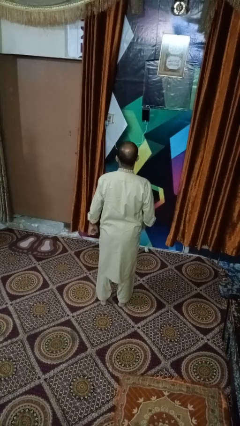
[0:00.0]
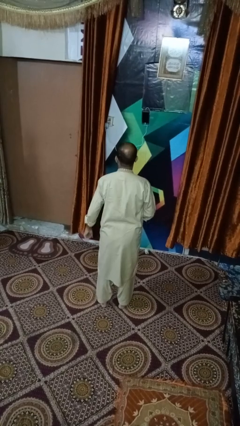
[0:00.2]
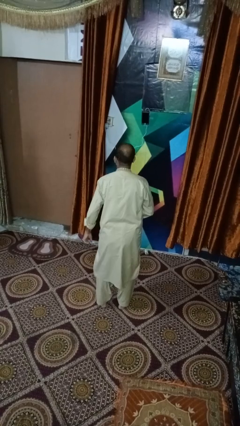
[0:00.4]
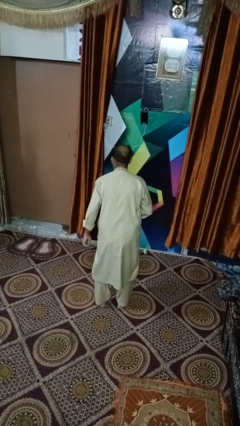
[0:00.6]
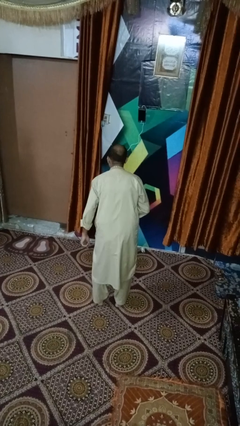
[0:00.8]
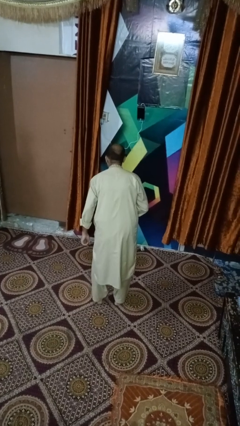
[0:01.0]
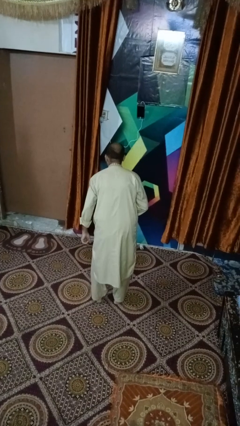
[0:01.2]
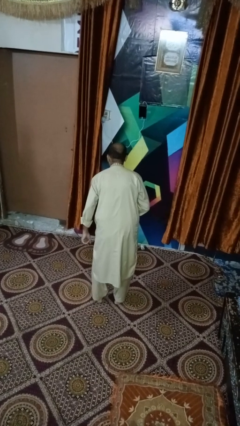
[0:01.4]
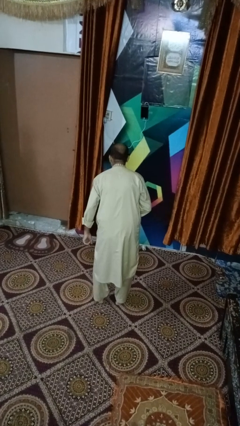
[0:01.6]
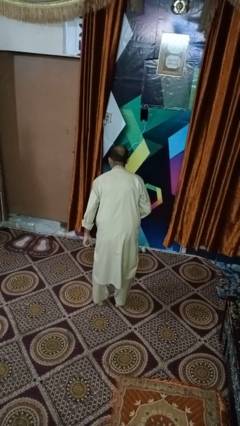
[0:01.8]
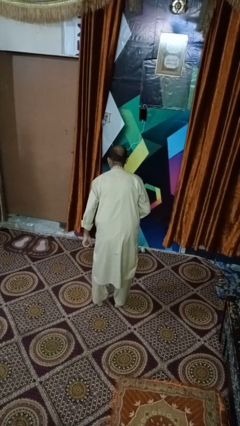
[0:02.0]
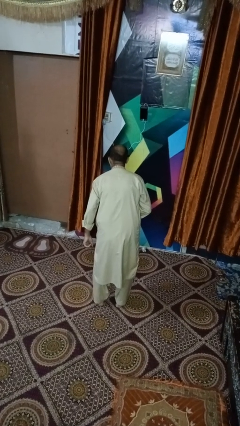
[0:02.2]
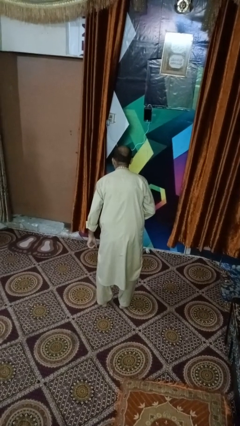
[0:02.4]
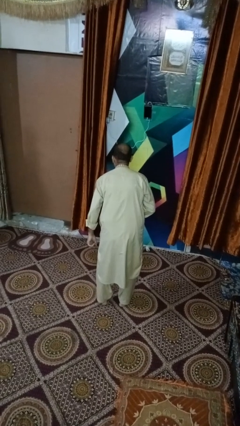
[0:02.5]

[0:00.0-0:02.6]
person bows

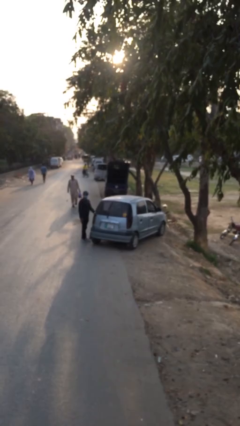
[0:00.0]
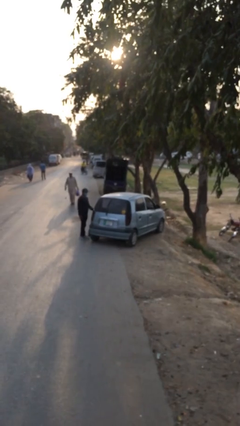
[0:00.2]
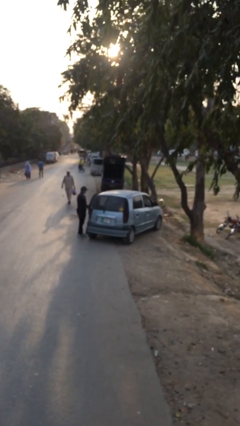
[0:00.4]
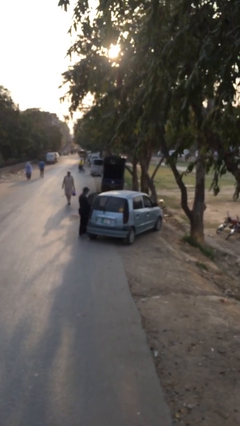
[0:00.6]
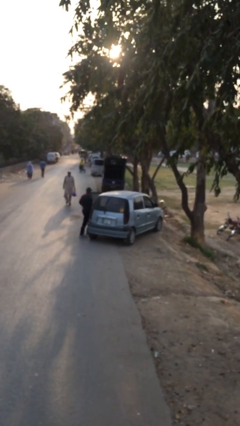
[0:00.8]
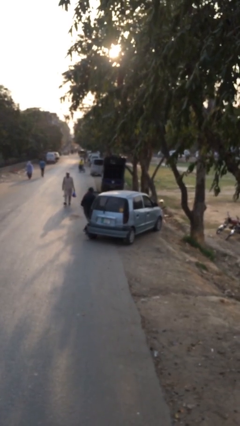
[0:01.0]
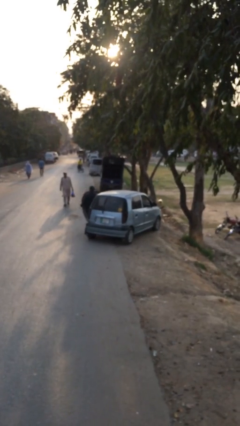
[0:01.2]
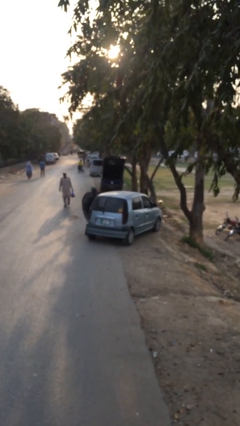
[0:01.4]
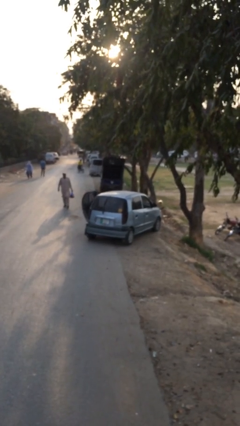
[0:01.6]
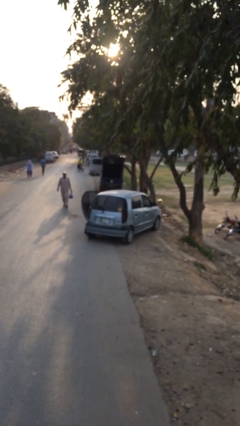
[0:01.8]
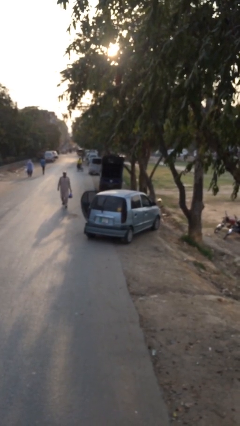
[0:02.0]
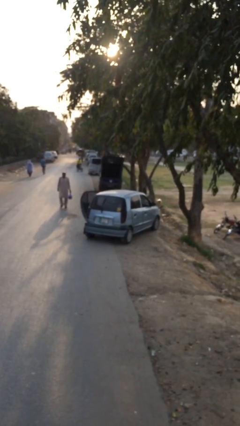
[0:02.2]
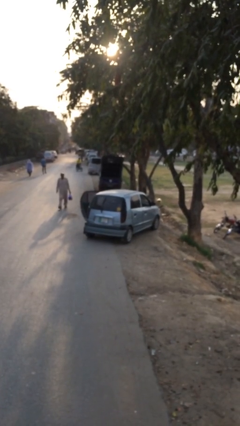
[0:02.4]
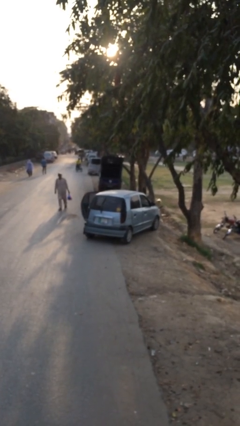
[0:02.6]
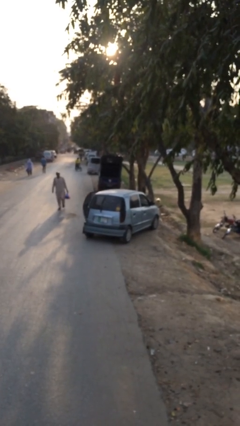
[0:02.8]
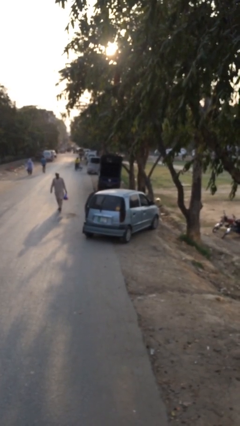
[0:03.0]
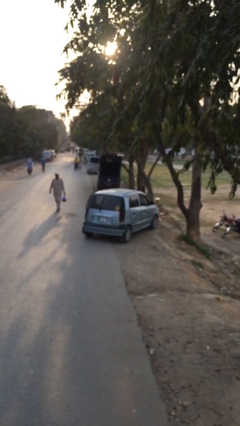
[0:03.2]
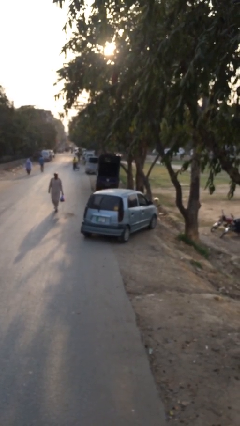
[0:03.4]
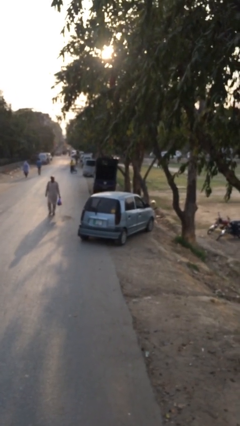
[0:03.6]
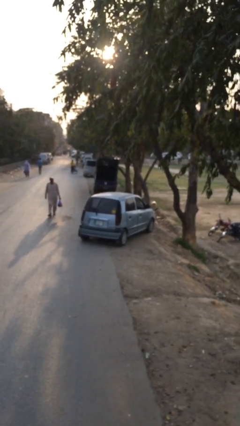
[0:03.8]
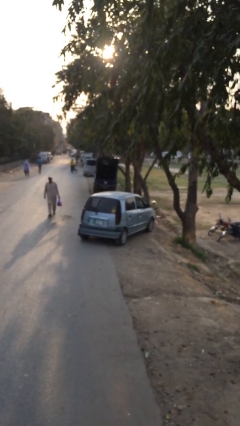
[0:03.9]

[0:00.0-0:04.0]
car picks up person

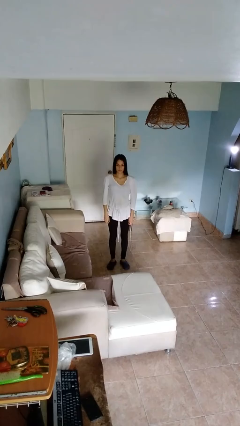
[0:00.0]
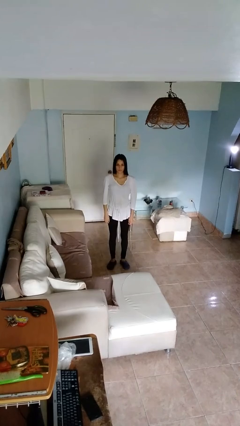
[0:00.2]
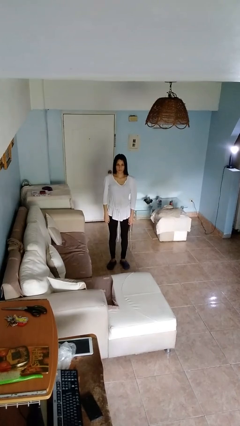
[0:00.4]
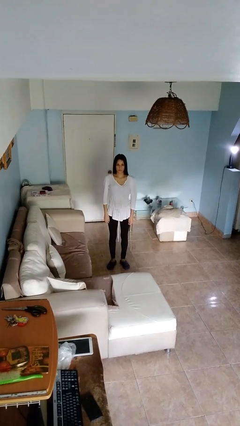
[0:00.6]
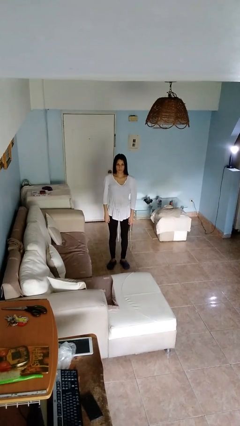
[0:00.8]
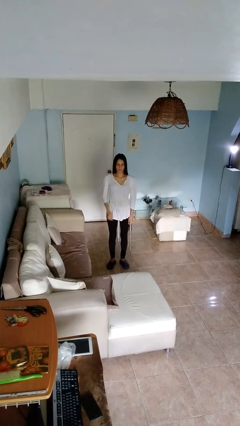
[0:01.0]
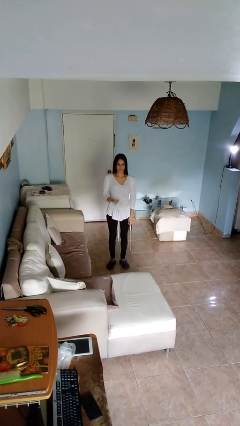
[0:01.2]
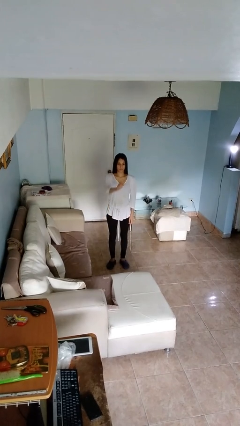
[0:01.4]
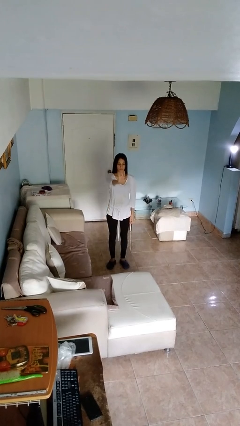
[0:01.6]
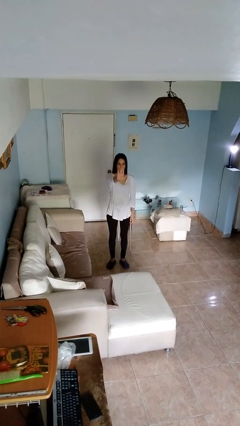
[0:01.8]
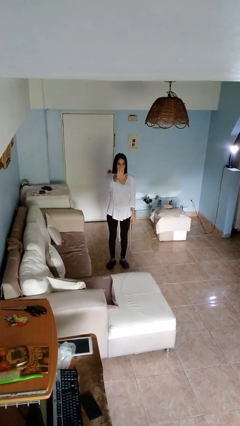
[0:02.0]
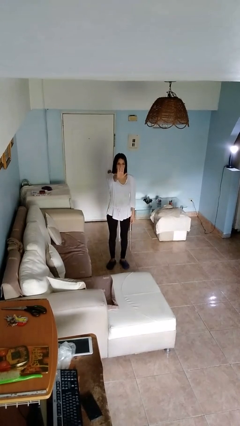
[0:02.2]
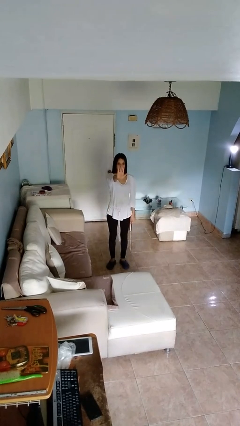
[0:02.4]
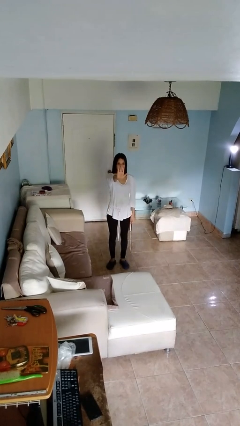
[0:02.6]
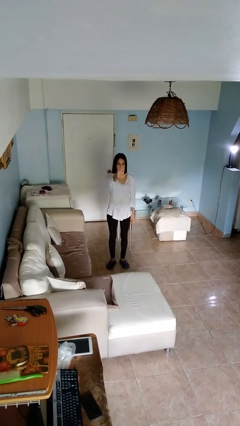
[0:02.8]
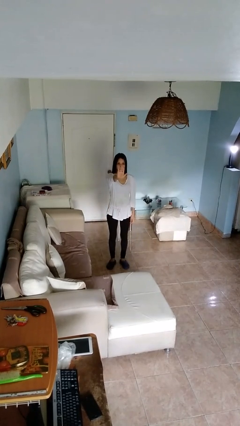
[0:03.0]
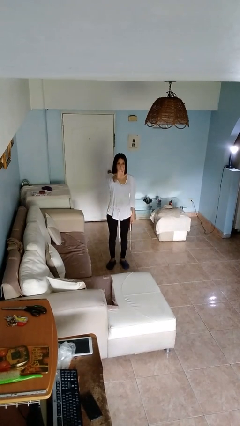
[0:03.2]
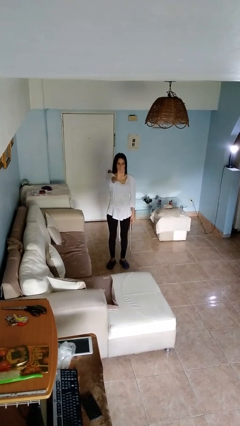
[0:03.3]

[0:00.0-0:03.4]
person gestures stop

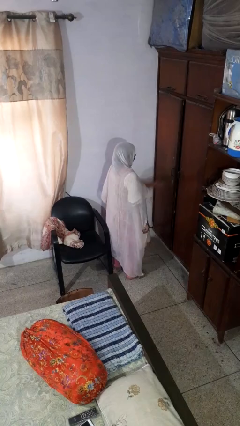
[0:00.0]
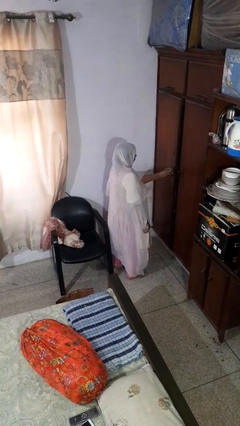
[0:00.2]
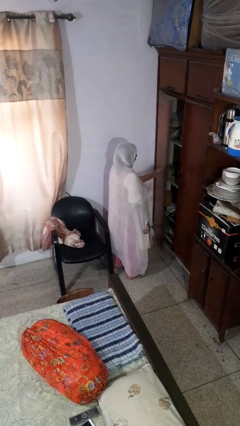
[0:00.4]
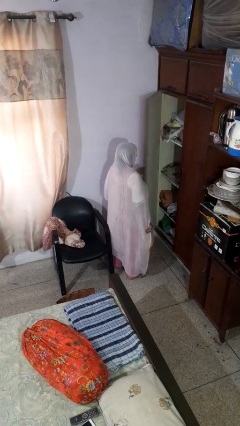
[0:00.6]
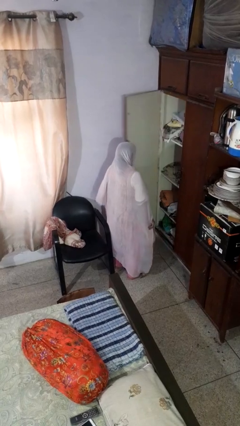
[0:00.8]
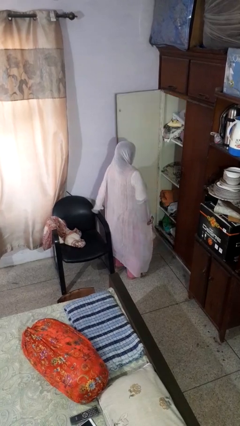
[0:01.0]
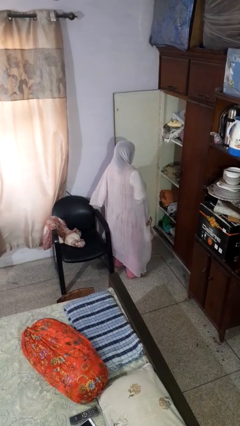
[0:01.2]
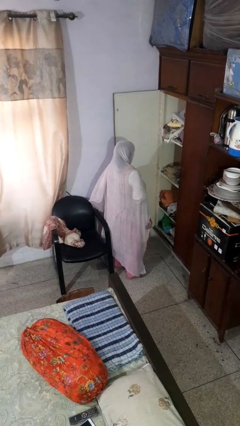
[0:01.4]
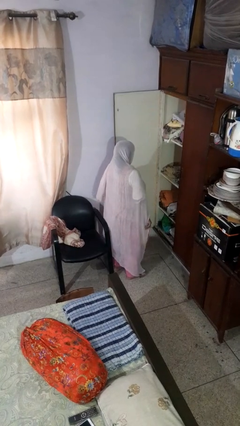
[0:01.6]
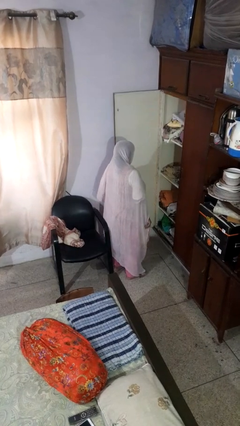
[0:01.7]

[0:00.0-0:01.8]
person opens closet door

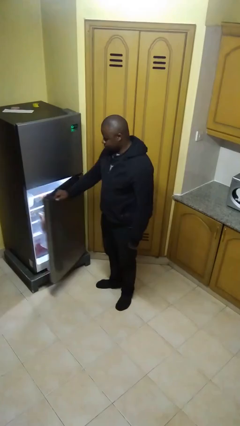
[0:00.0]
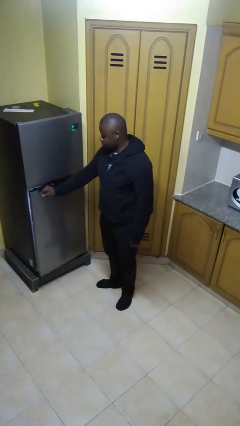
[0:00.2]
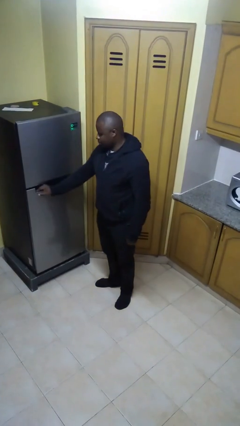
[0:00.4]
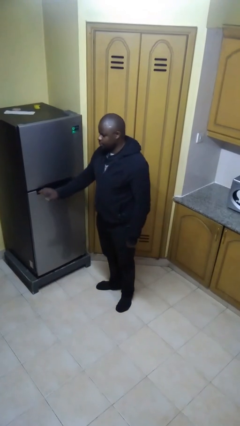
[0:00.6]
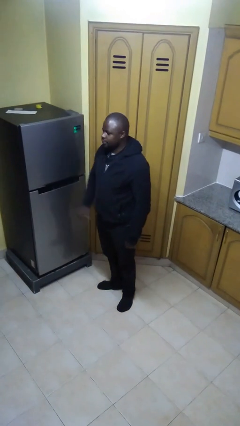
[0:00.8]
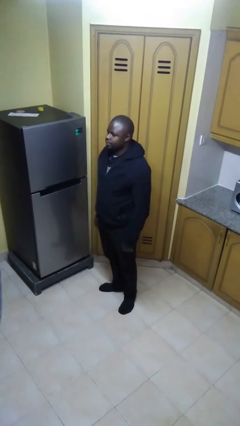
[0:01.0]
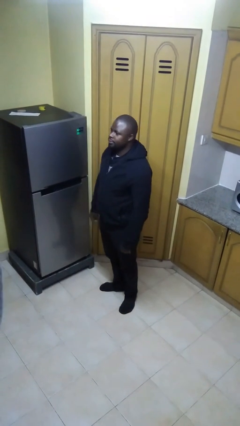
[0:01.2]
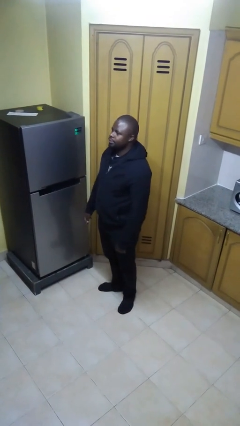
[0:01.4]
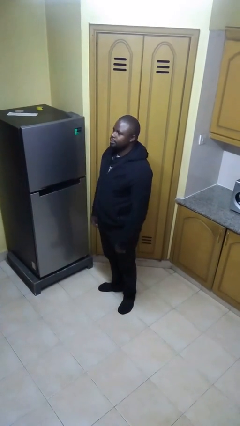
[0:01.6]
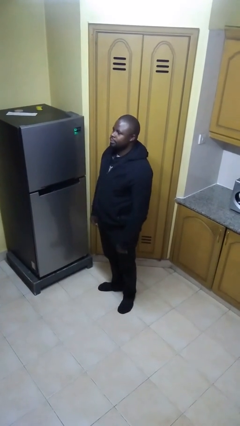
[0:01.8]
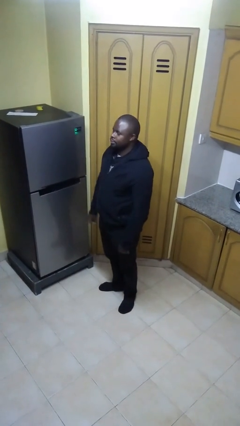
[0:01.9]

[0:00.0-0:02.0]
person closes refrigerator

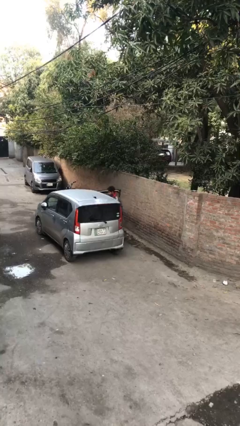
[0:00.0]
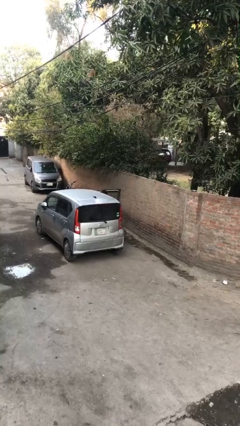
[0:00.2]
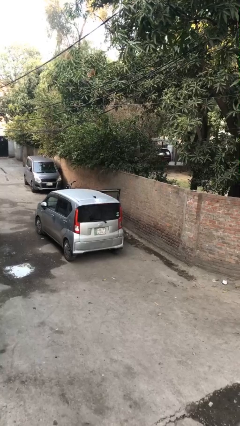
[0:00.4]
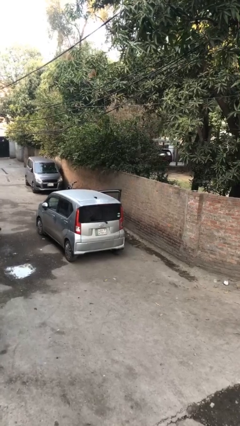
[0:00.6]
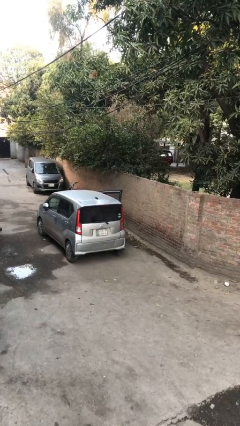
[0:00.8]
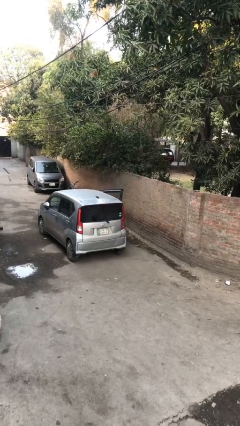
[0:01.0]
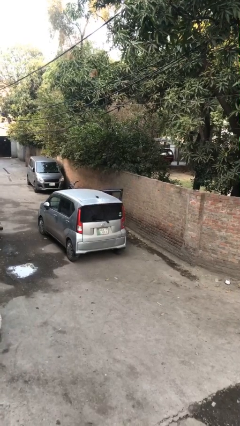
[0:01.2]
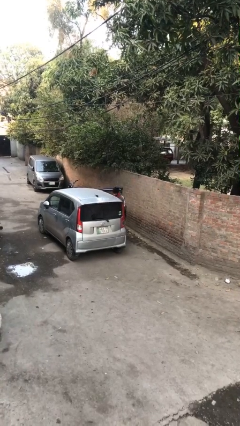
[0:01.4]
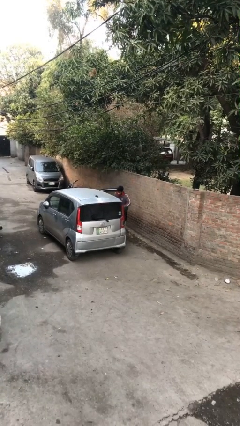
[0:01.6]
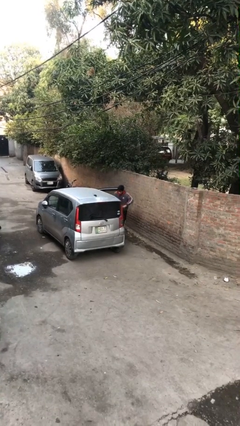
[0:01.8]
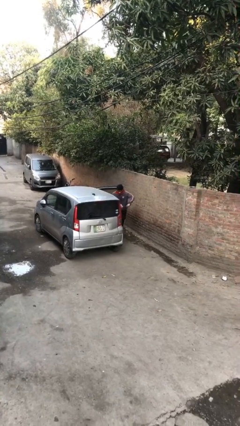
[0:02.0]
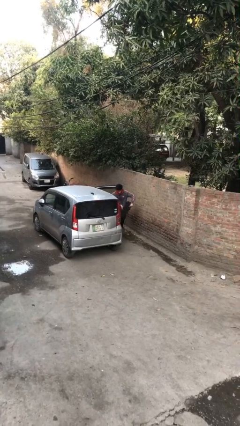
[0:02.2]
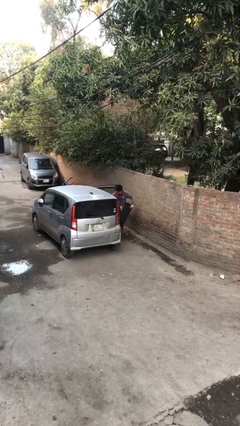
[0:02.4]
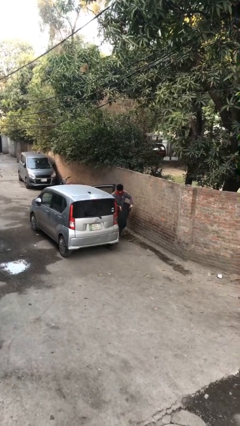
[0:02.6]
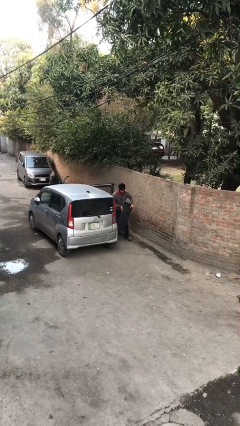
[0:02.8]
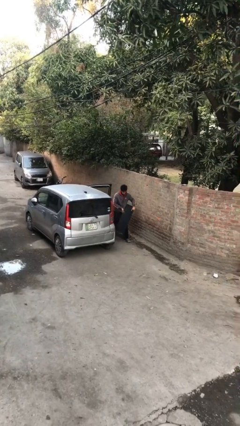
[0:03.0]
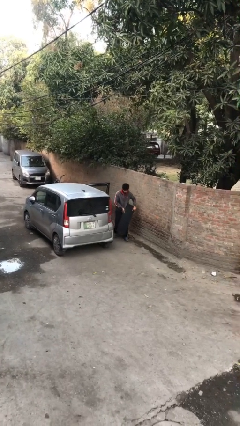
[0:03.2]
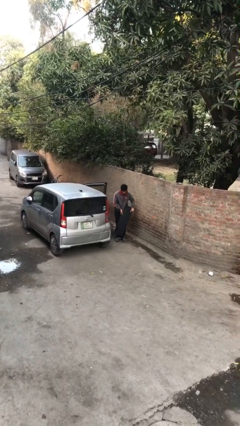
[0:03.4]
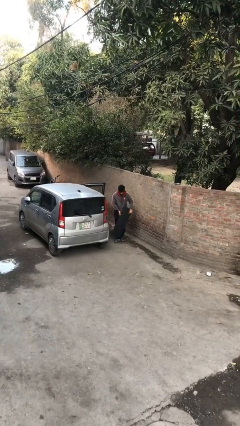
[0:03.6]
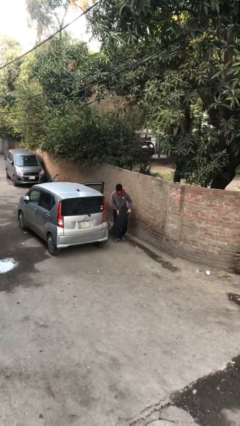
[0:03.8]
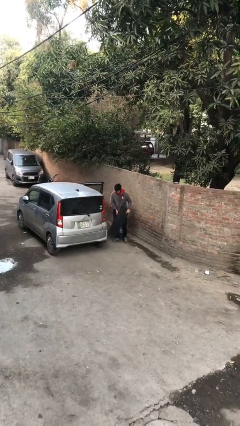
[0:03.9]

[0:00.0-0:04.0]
person unloads car
